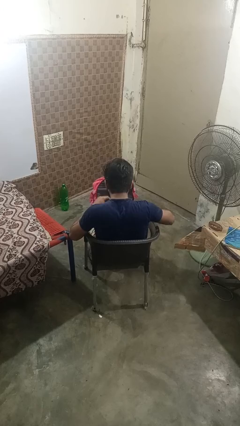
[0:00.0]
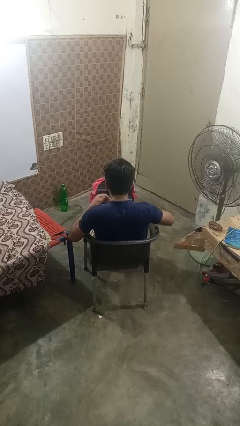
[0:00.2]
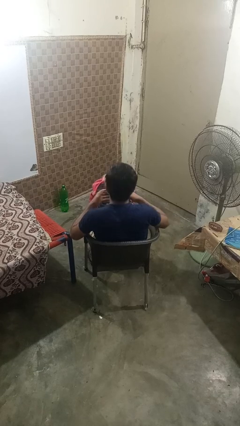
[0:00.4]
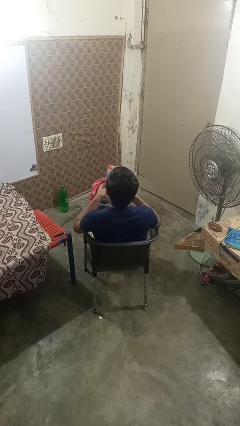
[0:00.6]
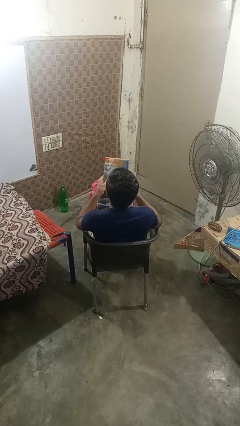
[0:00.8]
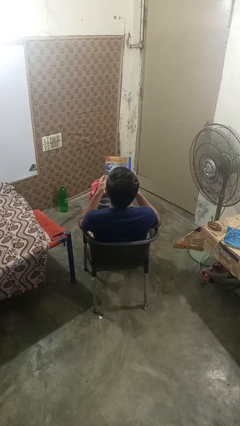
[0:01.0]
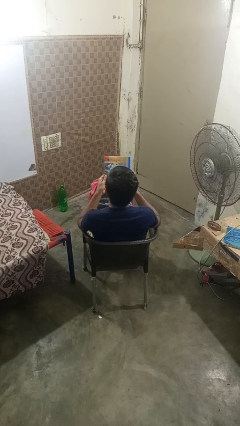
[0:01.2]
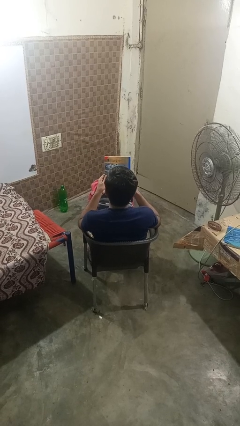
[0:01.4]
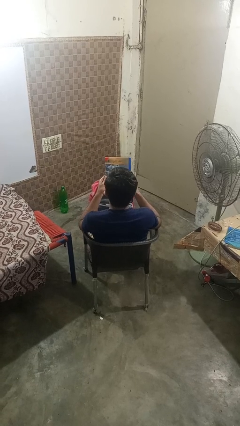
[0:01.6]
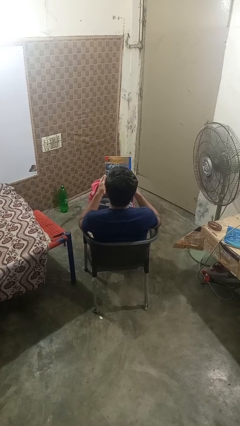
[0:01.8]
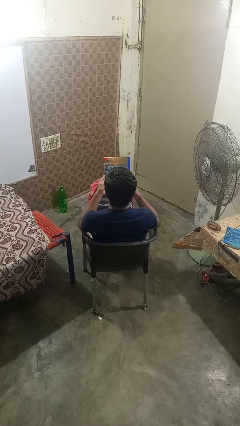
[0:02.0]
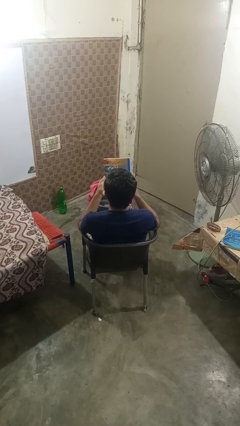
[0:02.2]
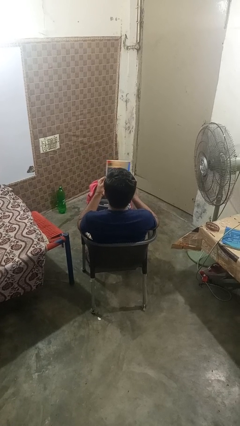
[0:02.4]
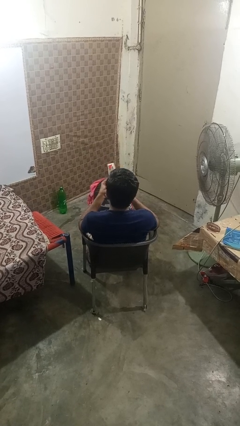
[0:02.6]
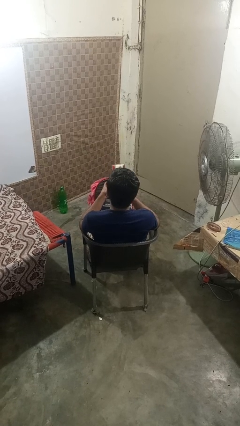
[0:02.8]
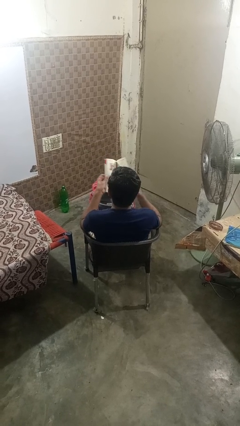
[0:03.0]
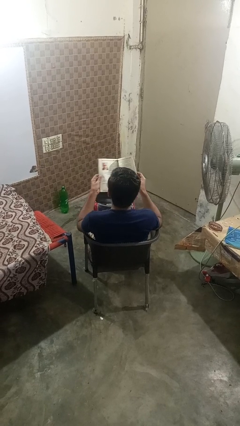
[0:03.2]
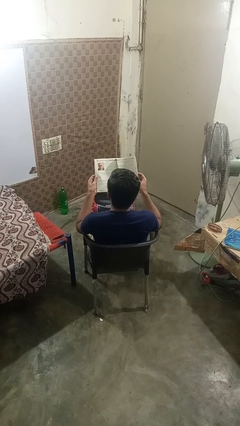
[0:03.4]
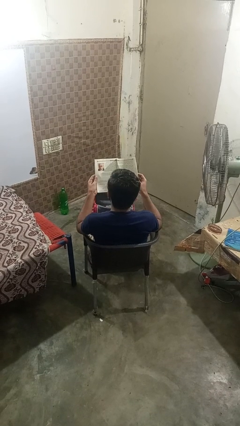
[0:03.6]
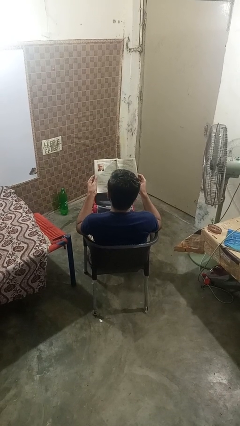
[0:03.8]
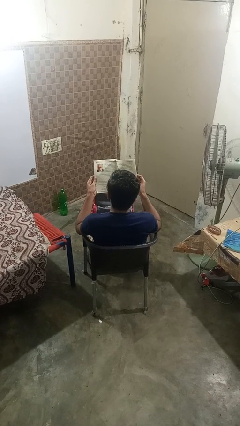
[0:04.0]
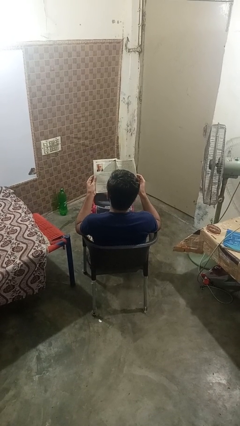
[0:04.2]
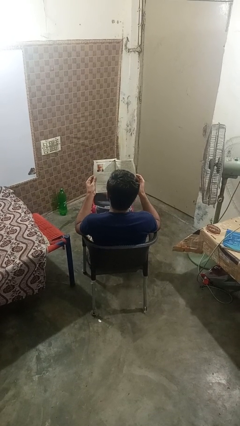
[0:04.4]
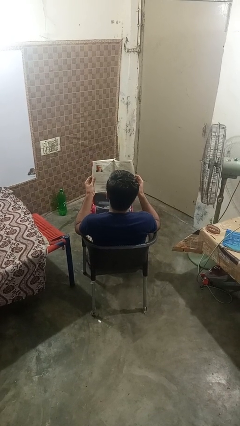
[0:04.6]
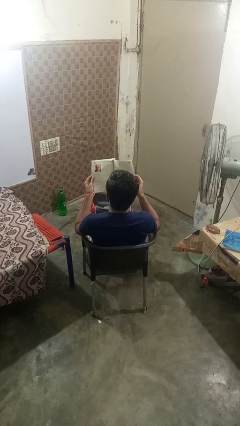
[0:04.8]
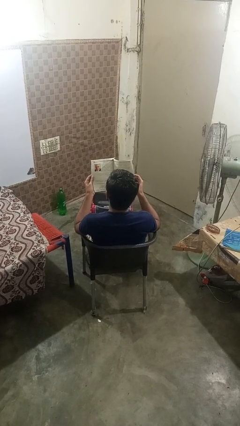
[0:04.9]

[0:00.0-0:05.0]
person takes object from backpack

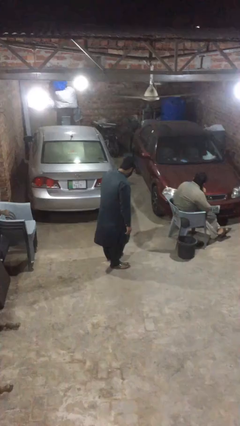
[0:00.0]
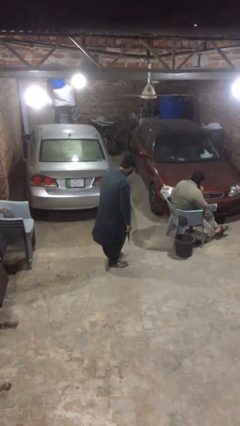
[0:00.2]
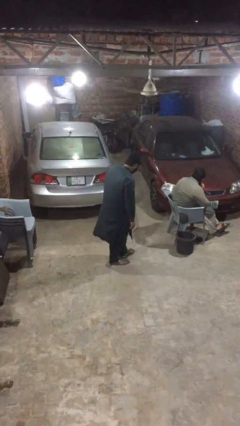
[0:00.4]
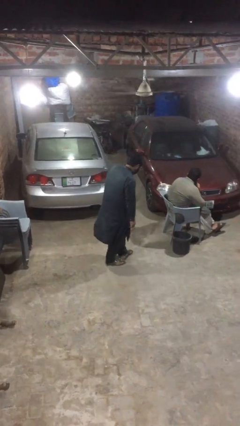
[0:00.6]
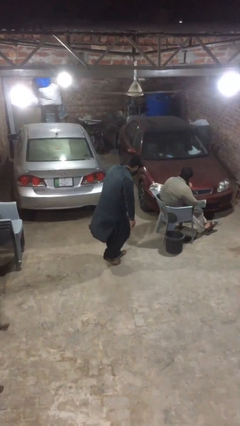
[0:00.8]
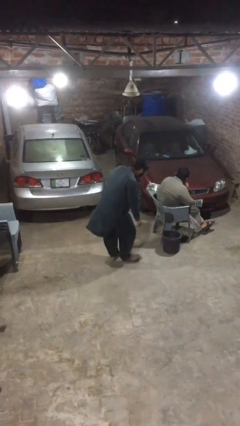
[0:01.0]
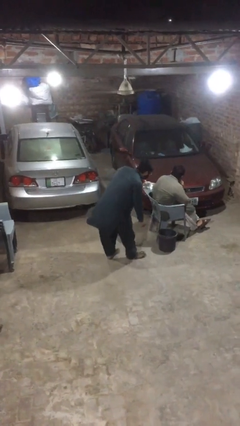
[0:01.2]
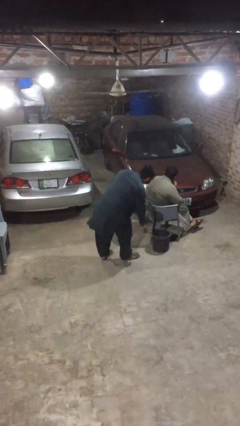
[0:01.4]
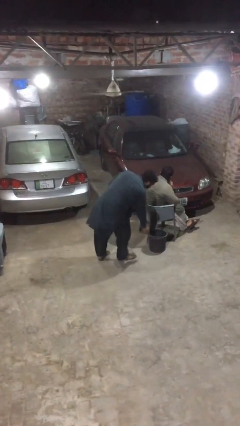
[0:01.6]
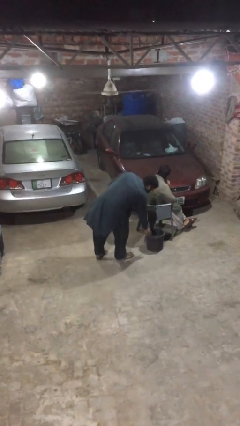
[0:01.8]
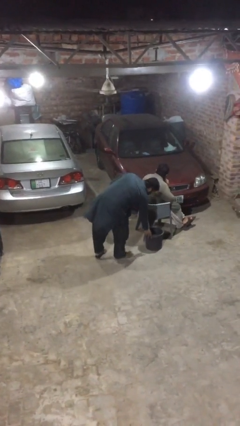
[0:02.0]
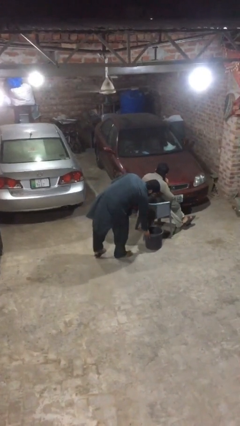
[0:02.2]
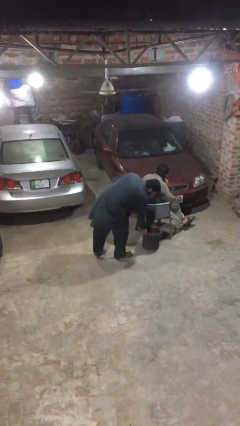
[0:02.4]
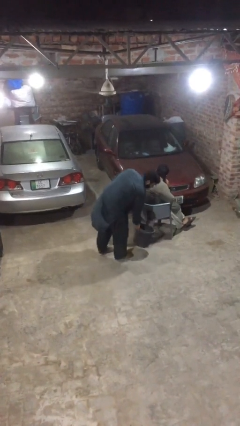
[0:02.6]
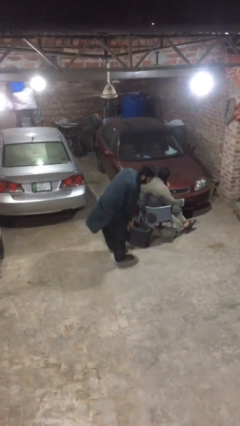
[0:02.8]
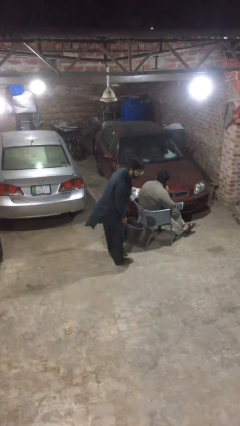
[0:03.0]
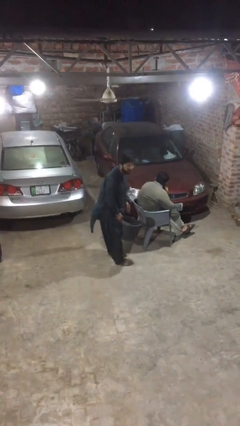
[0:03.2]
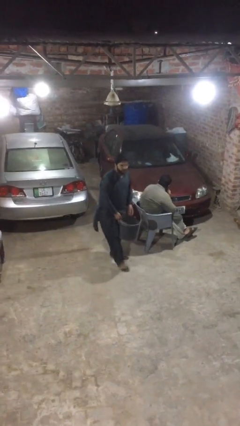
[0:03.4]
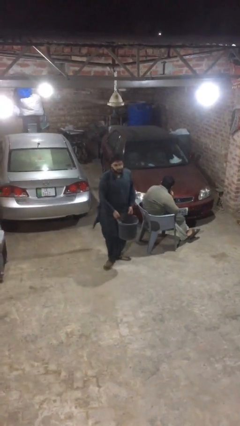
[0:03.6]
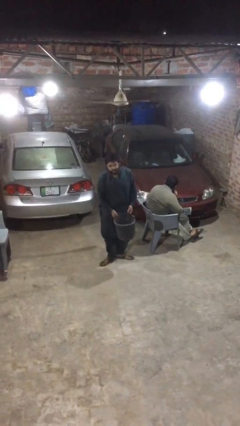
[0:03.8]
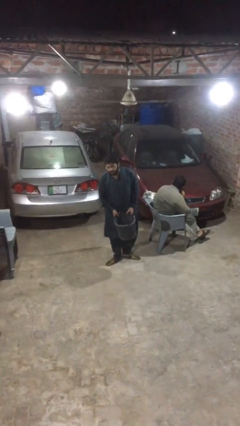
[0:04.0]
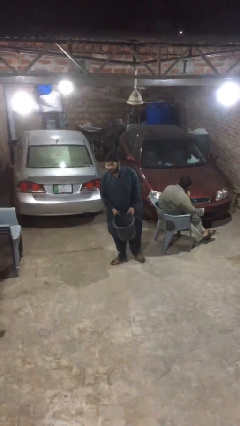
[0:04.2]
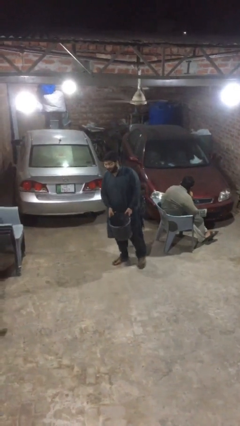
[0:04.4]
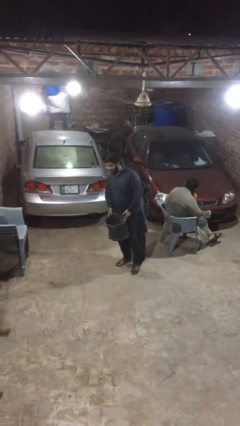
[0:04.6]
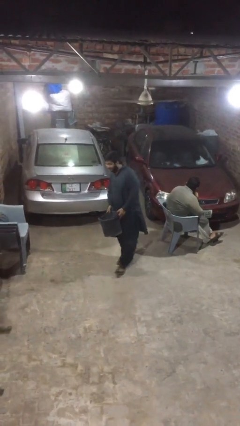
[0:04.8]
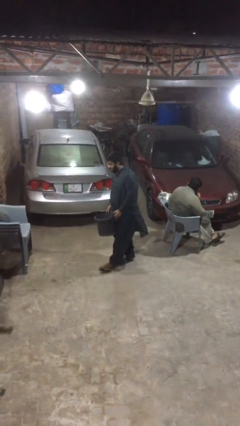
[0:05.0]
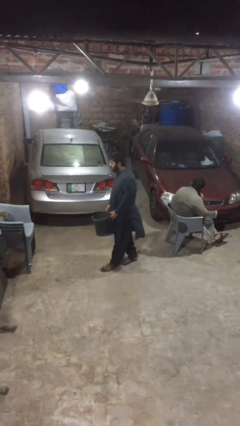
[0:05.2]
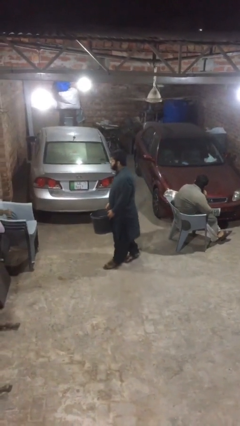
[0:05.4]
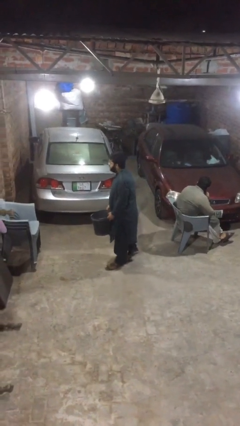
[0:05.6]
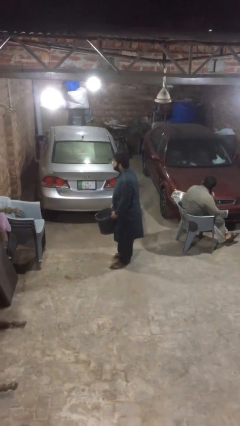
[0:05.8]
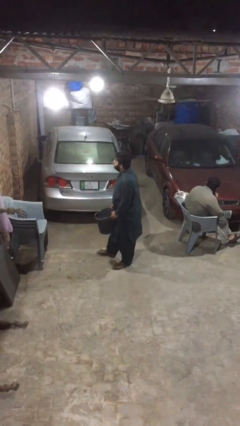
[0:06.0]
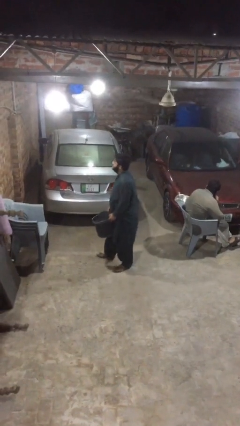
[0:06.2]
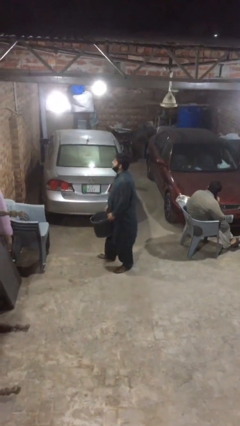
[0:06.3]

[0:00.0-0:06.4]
person steals object from person

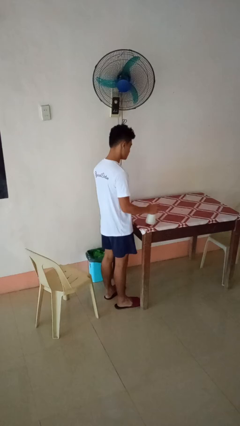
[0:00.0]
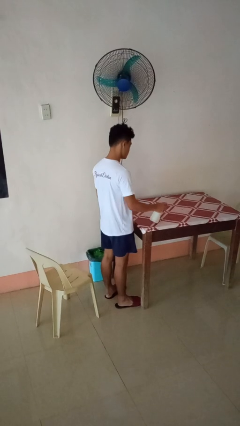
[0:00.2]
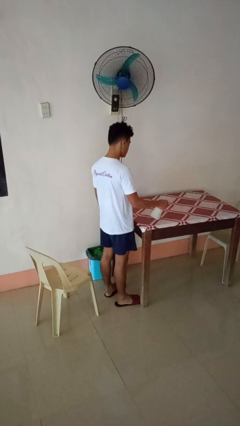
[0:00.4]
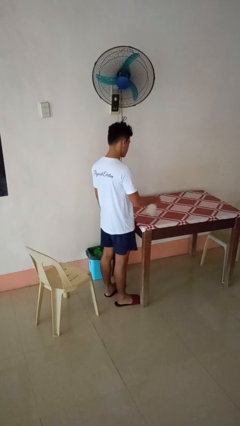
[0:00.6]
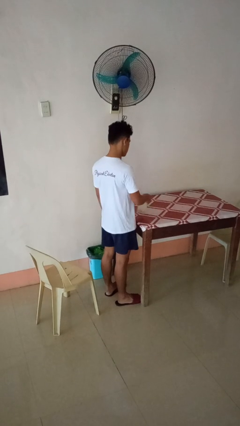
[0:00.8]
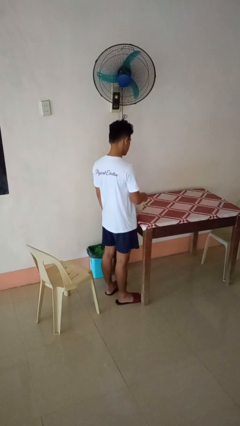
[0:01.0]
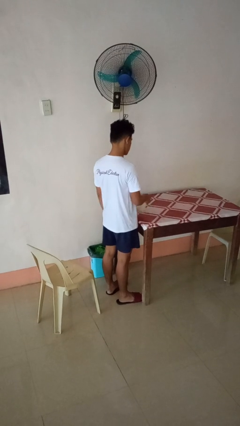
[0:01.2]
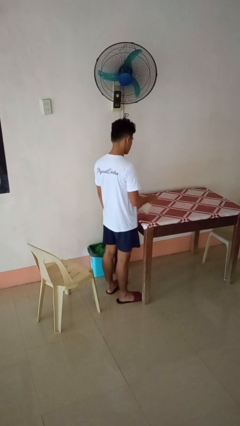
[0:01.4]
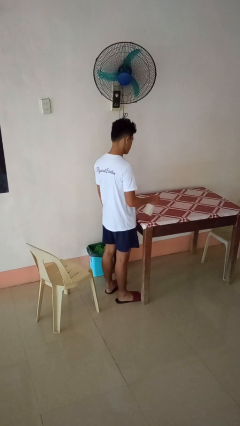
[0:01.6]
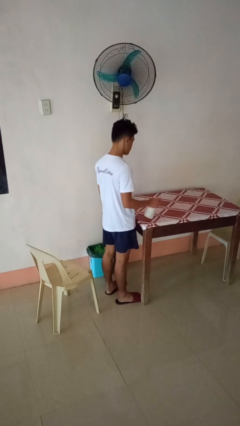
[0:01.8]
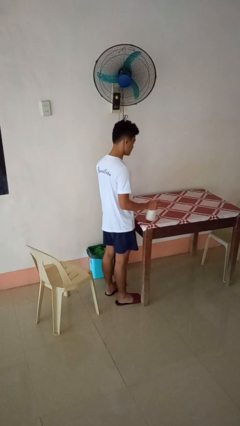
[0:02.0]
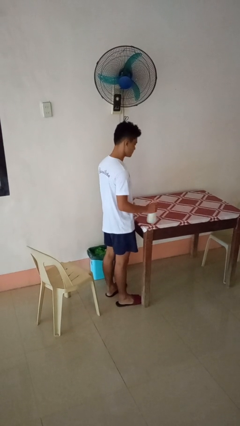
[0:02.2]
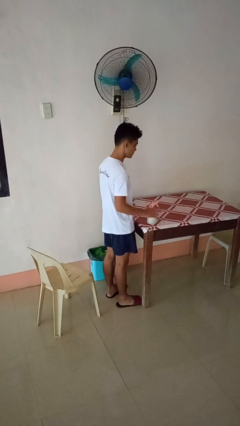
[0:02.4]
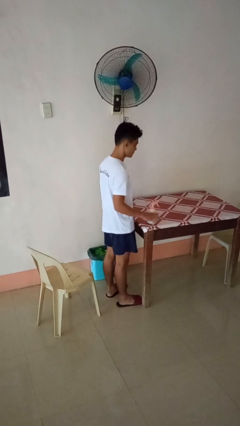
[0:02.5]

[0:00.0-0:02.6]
person sprays from bottle

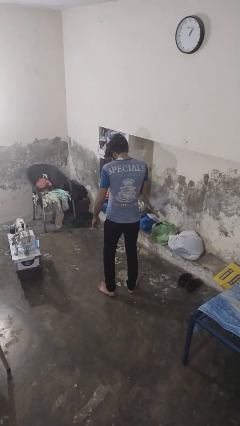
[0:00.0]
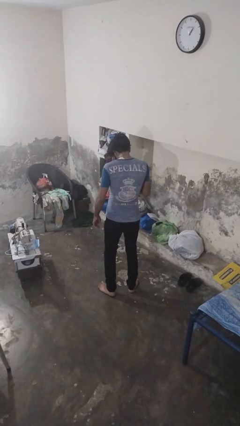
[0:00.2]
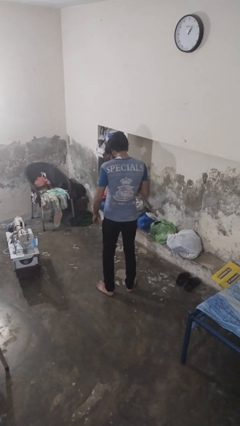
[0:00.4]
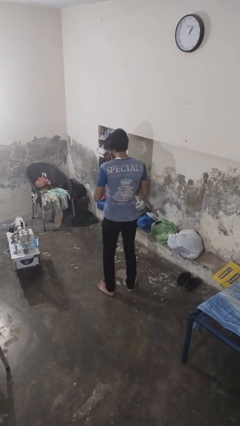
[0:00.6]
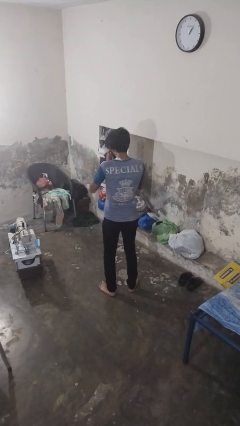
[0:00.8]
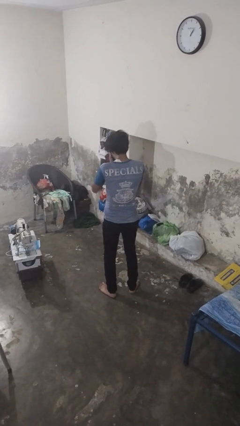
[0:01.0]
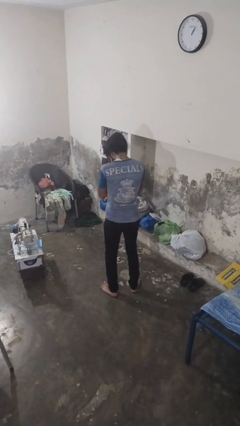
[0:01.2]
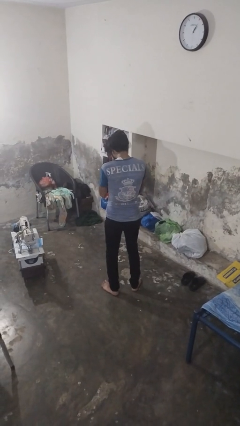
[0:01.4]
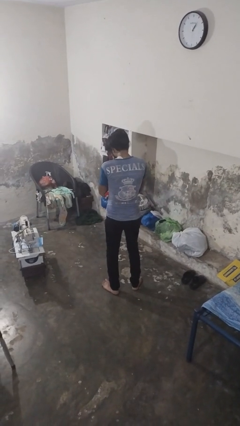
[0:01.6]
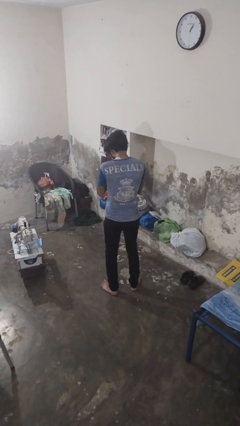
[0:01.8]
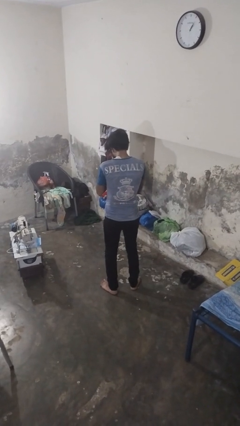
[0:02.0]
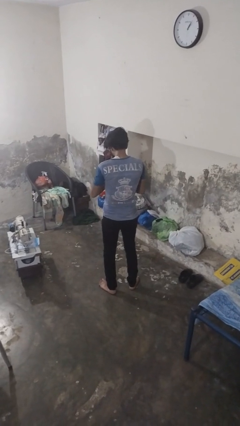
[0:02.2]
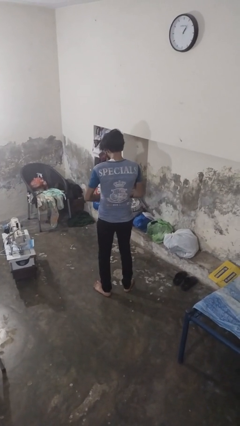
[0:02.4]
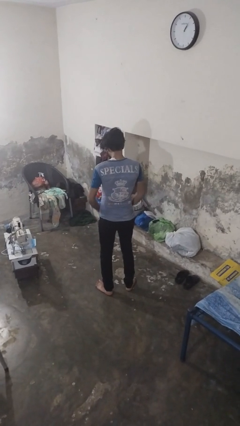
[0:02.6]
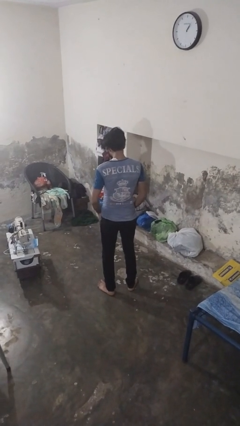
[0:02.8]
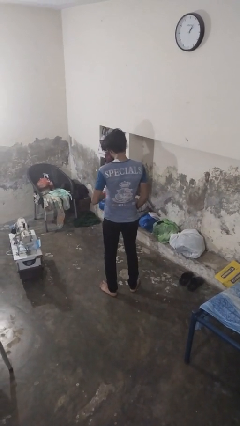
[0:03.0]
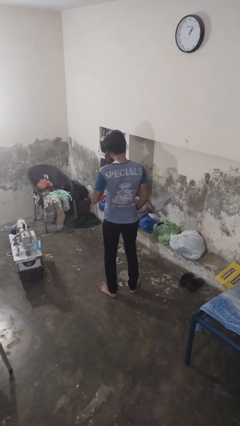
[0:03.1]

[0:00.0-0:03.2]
person sneezes into hand
